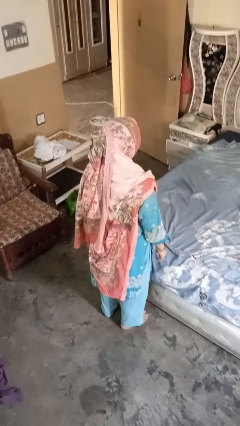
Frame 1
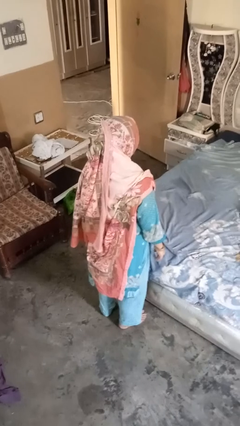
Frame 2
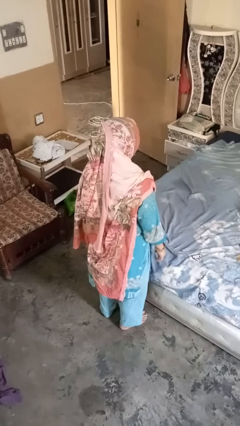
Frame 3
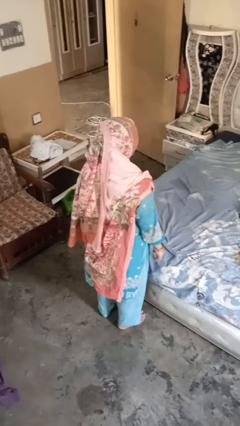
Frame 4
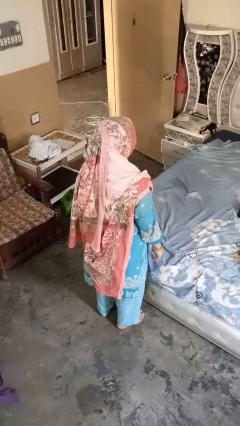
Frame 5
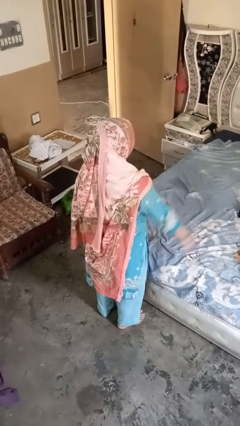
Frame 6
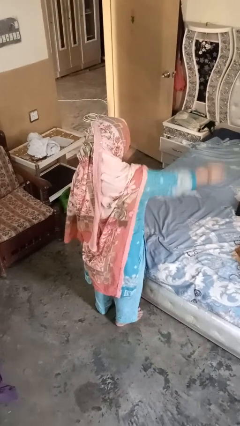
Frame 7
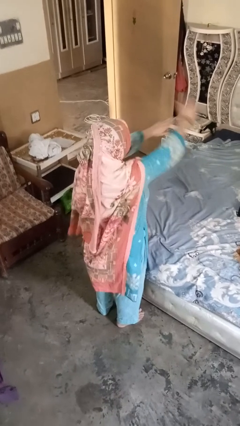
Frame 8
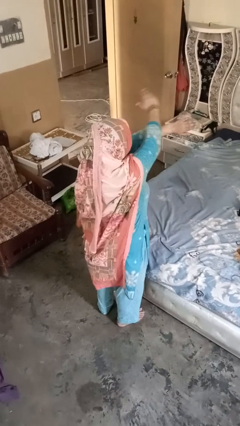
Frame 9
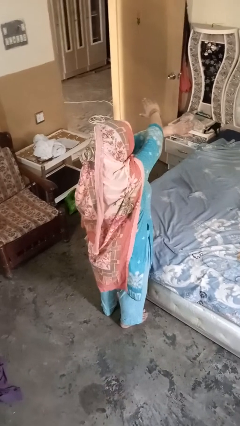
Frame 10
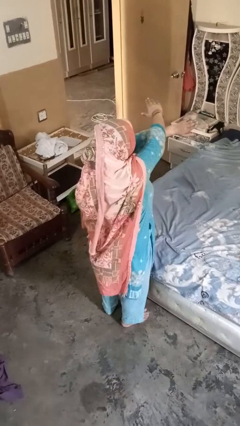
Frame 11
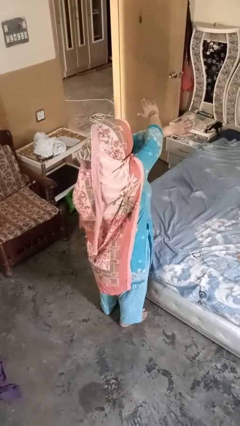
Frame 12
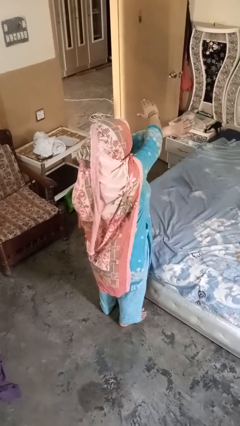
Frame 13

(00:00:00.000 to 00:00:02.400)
person gestures arms x

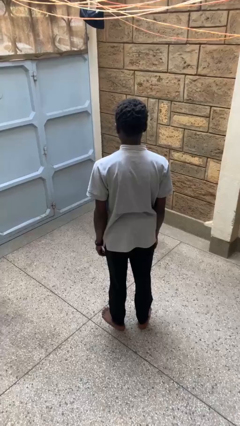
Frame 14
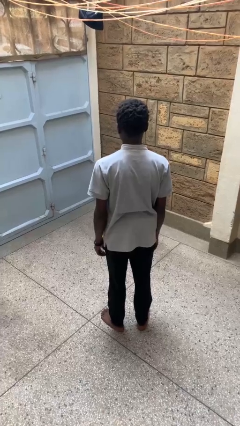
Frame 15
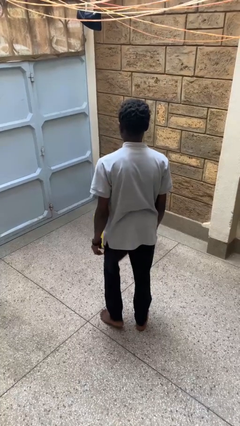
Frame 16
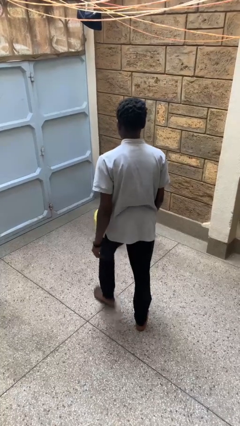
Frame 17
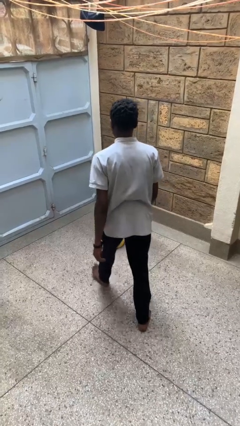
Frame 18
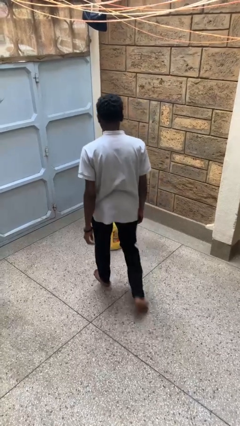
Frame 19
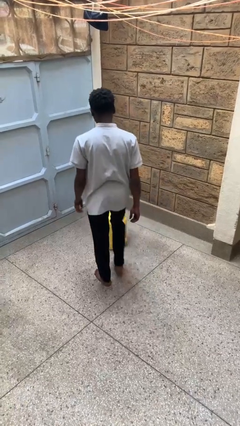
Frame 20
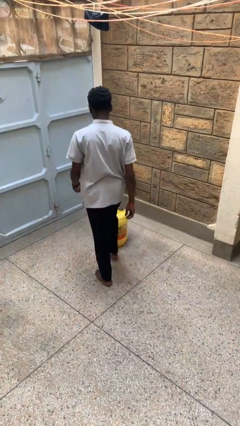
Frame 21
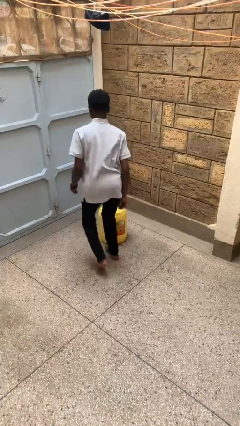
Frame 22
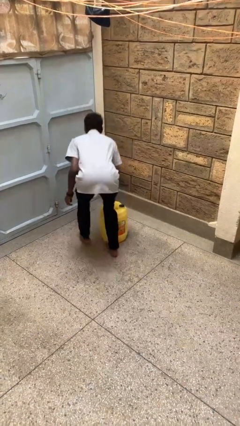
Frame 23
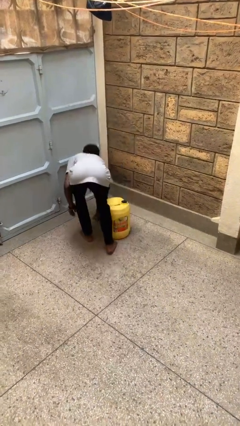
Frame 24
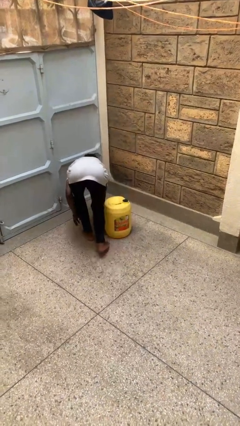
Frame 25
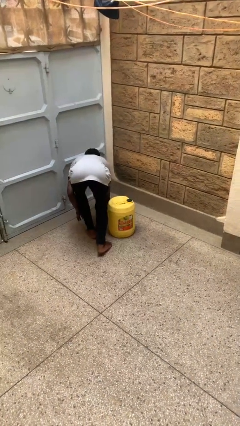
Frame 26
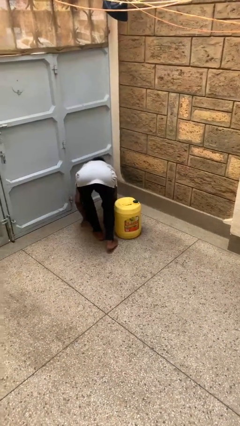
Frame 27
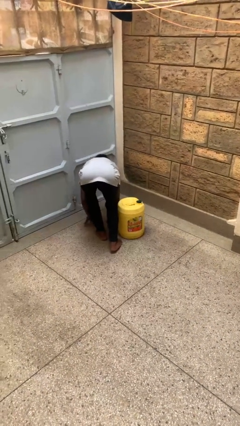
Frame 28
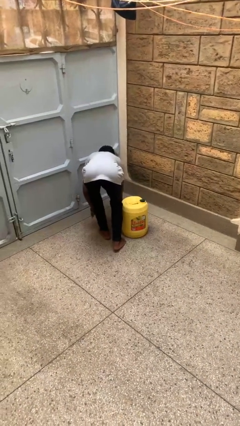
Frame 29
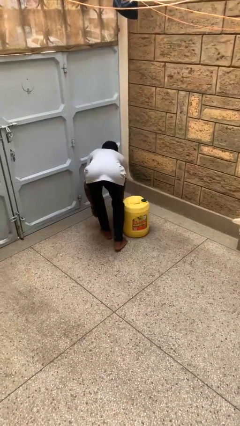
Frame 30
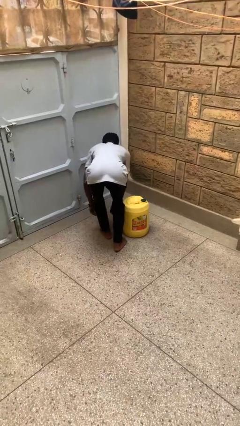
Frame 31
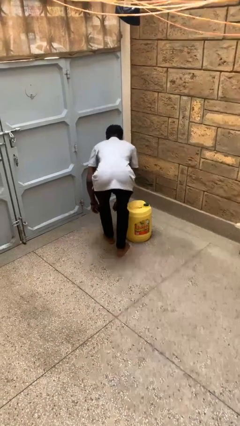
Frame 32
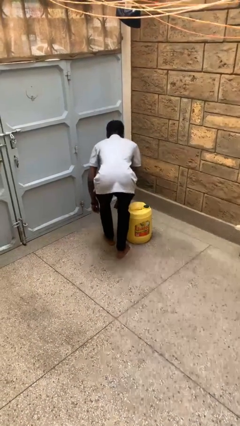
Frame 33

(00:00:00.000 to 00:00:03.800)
person trips on object on floor

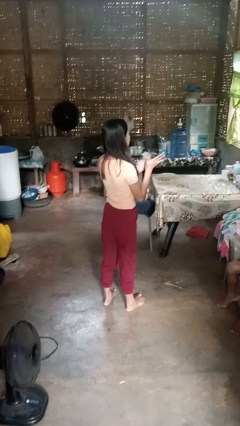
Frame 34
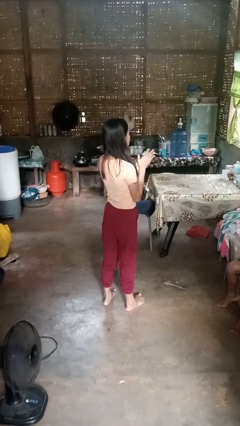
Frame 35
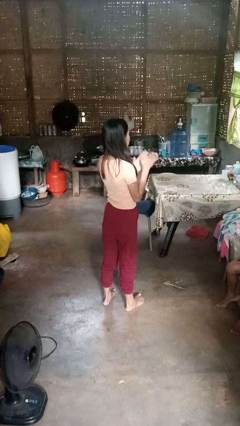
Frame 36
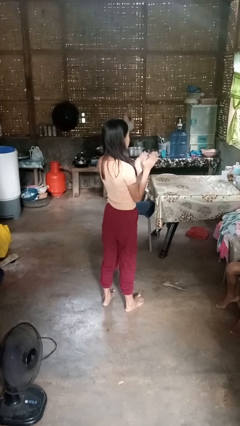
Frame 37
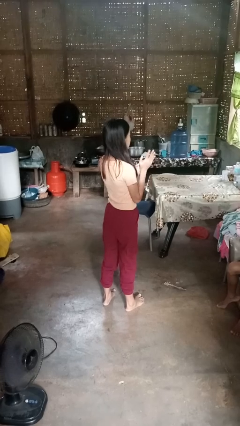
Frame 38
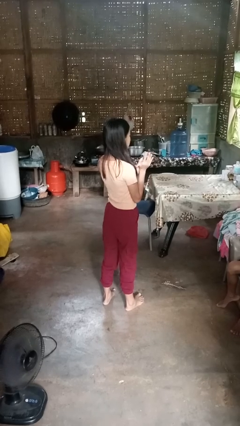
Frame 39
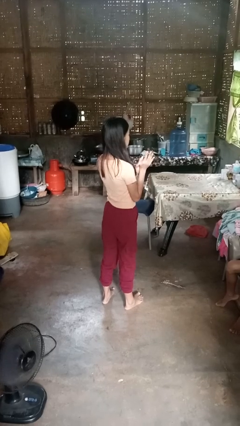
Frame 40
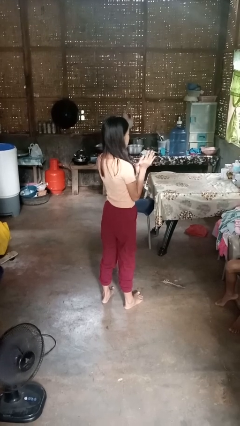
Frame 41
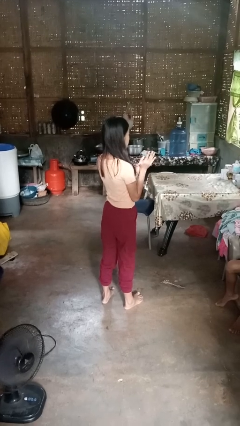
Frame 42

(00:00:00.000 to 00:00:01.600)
person claps hands

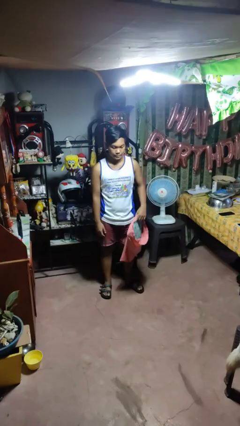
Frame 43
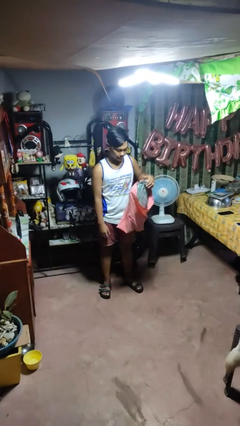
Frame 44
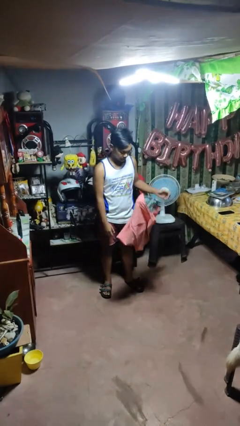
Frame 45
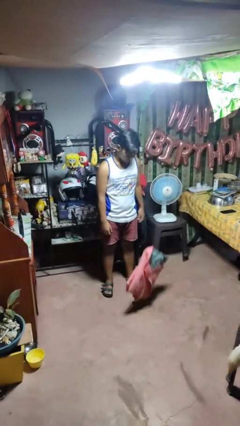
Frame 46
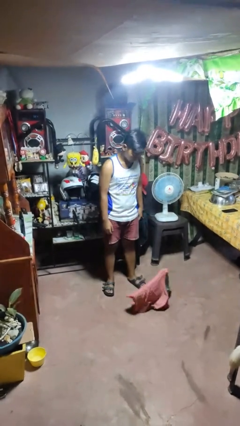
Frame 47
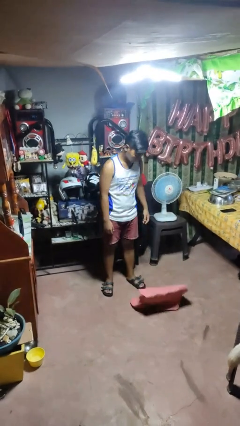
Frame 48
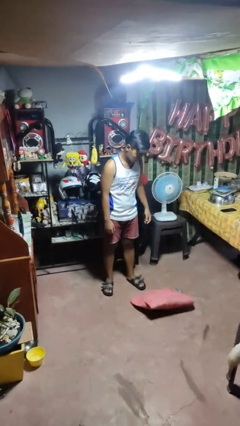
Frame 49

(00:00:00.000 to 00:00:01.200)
person drops object

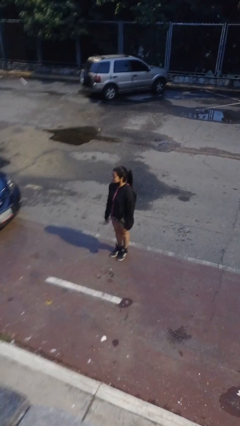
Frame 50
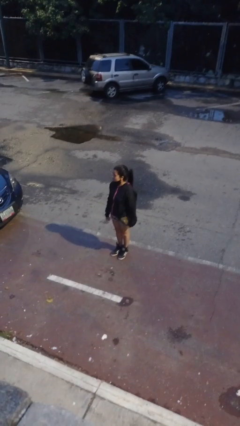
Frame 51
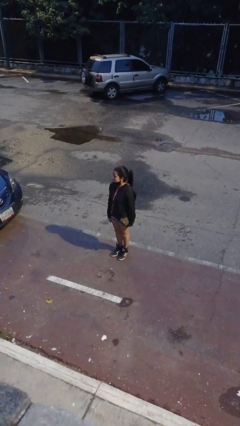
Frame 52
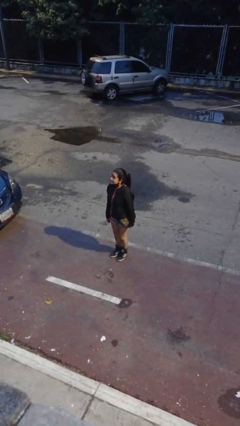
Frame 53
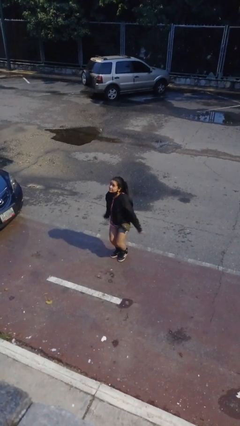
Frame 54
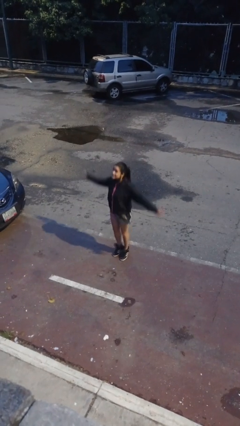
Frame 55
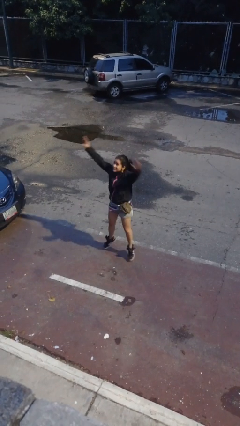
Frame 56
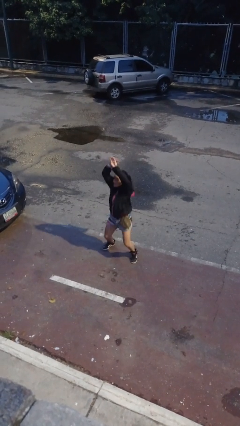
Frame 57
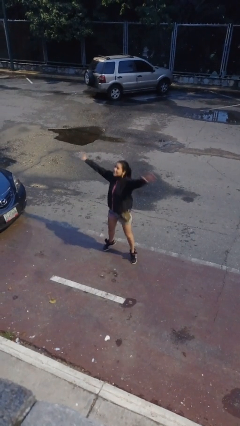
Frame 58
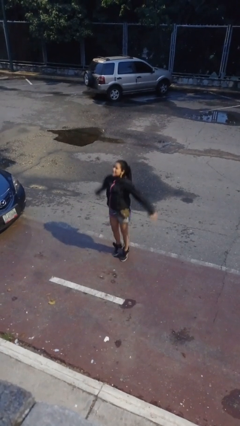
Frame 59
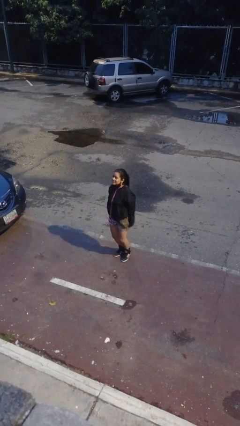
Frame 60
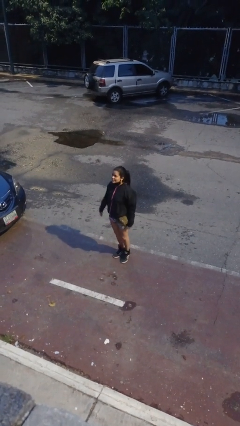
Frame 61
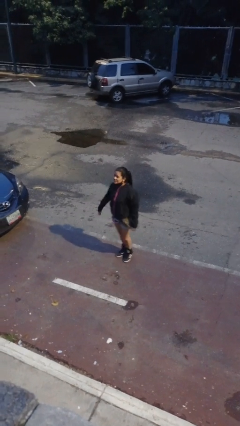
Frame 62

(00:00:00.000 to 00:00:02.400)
person exercises with jumping jacks

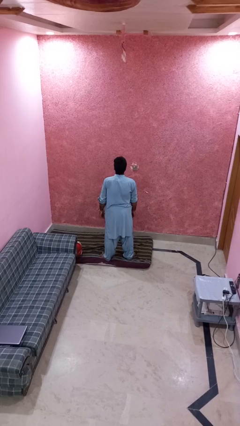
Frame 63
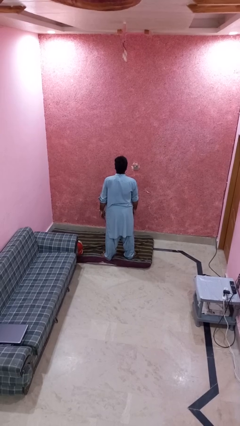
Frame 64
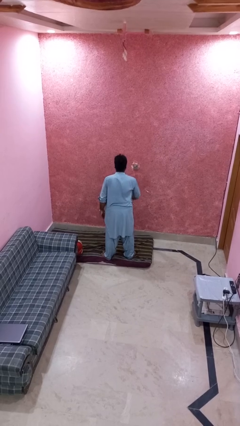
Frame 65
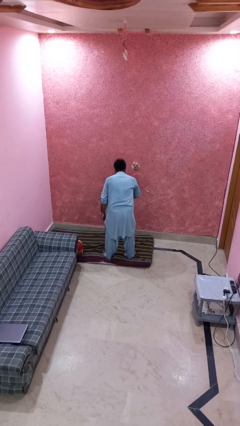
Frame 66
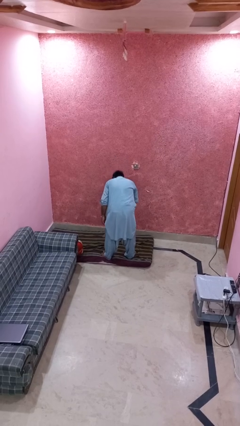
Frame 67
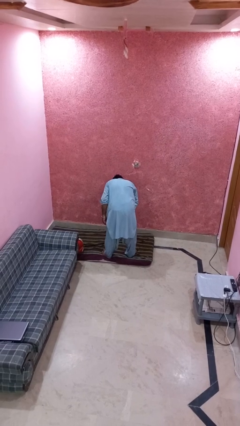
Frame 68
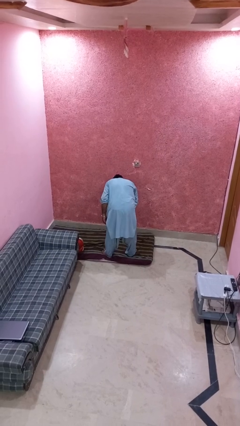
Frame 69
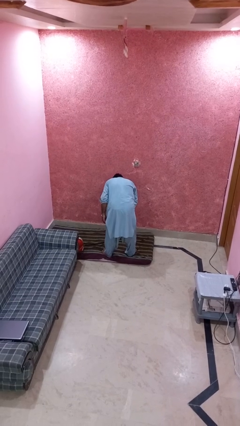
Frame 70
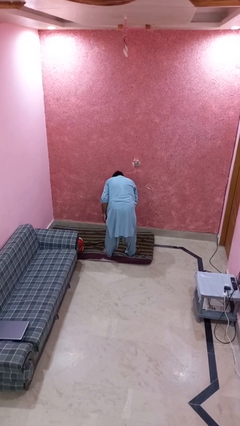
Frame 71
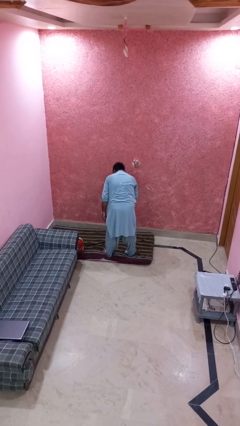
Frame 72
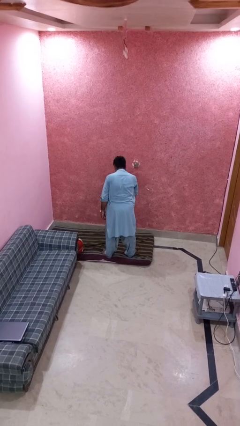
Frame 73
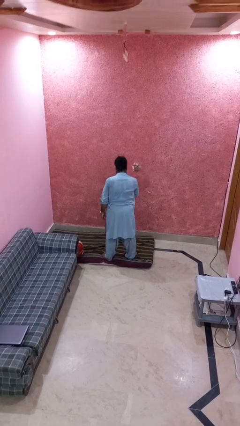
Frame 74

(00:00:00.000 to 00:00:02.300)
person bows

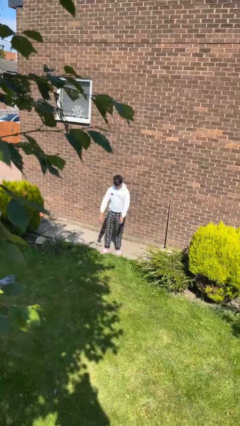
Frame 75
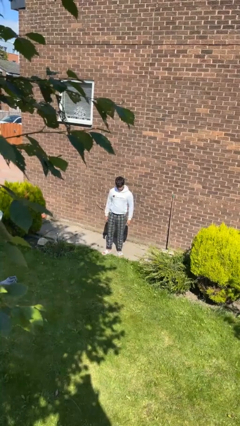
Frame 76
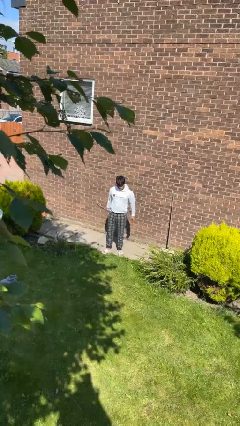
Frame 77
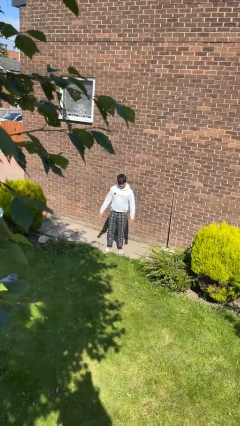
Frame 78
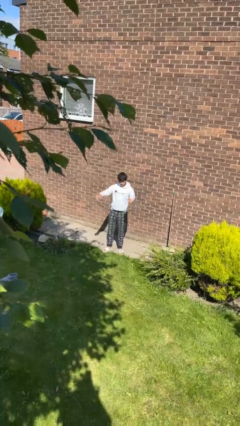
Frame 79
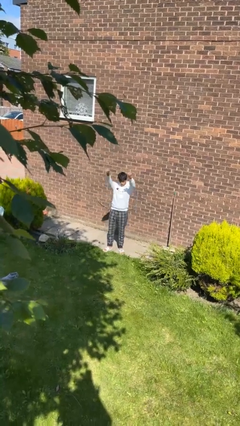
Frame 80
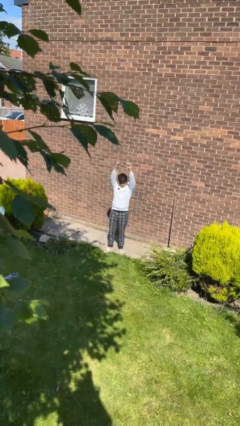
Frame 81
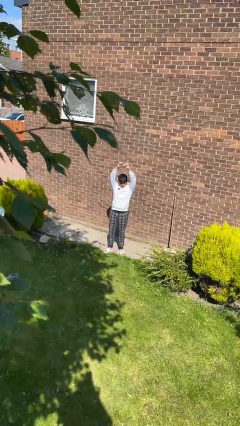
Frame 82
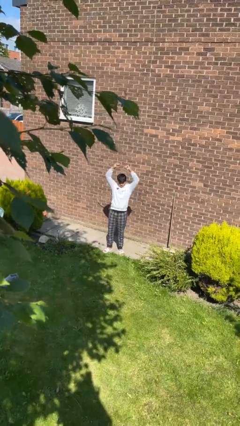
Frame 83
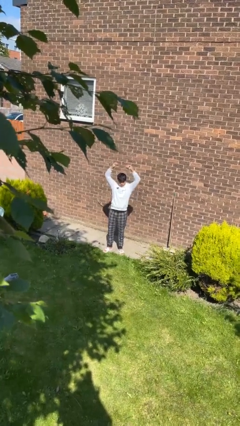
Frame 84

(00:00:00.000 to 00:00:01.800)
person stretches arms over head

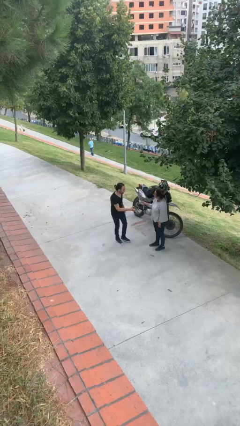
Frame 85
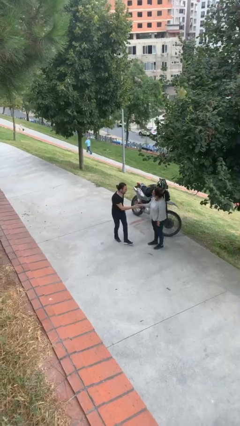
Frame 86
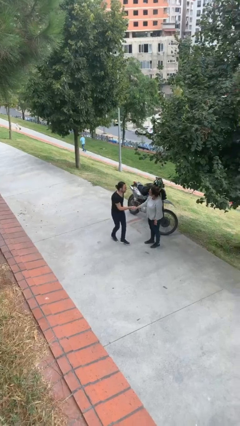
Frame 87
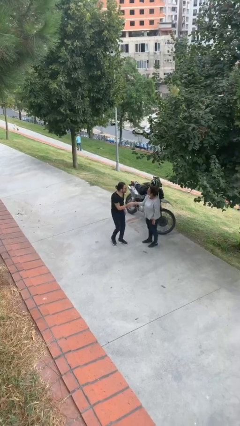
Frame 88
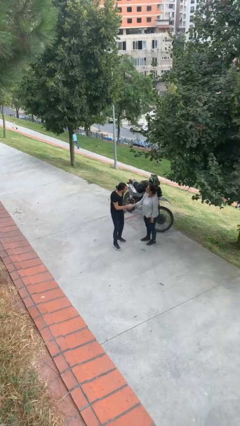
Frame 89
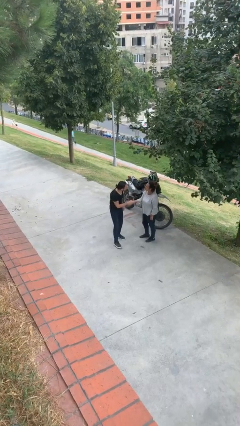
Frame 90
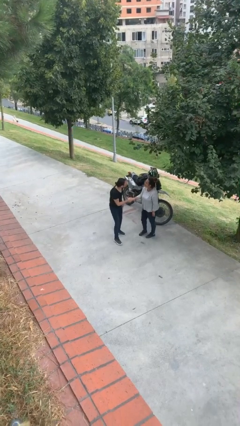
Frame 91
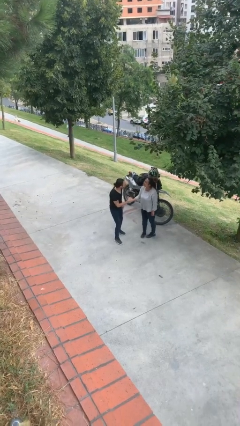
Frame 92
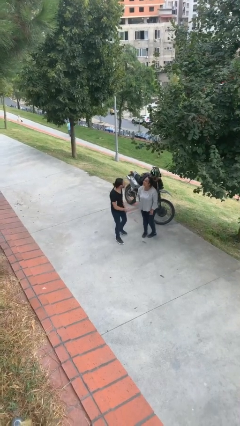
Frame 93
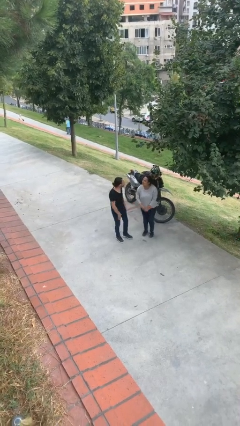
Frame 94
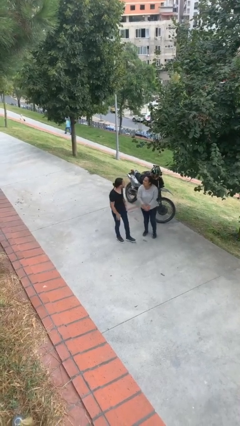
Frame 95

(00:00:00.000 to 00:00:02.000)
person shakes hand
